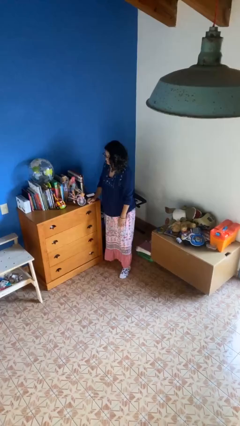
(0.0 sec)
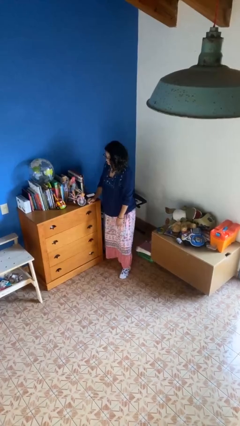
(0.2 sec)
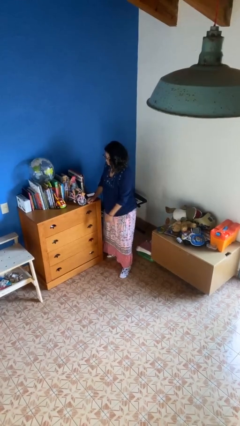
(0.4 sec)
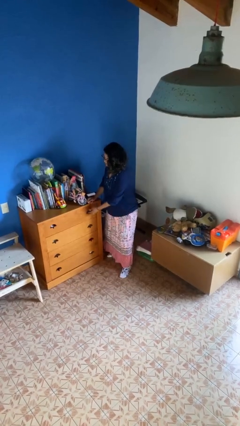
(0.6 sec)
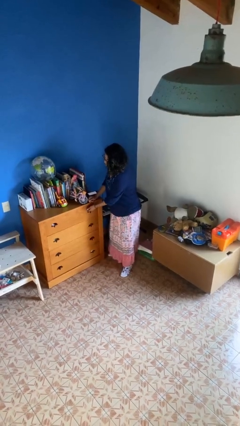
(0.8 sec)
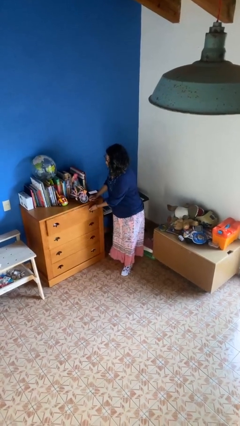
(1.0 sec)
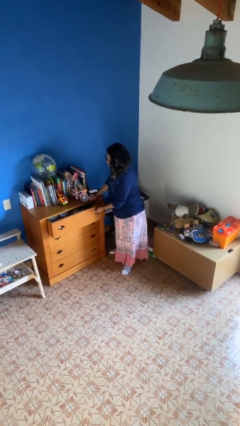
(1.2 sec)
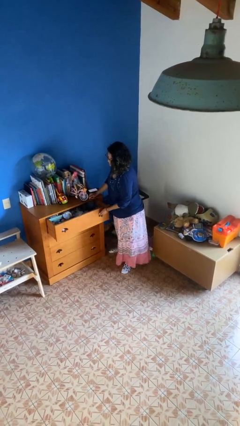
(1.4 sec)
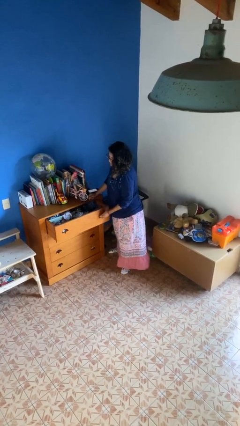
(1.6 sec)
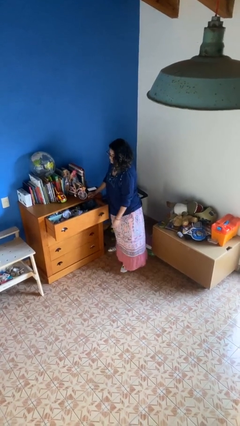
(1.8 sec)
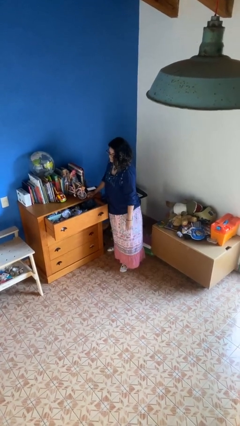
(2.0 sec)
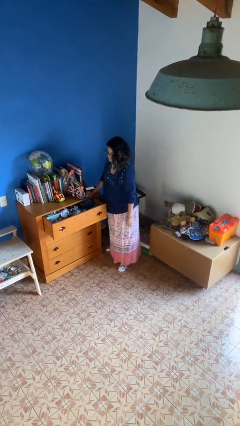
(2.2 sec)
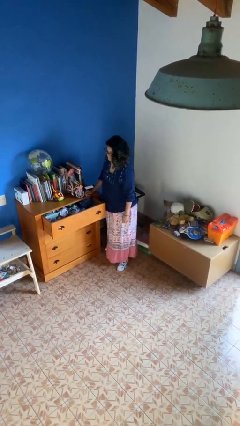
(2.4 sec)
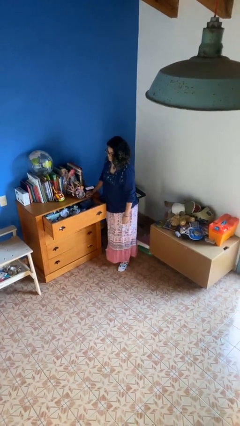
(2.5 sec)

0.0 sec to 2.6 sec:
person opens dresser drawer

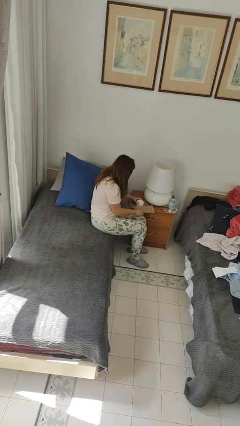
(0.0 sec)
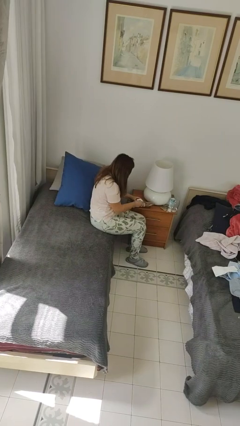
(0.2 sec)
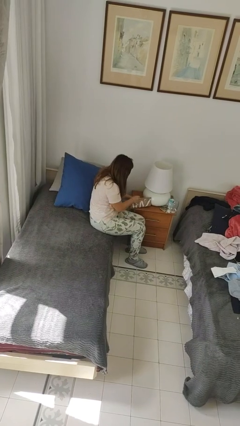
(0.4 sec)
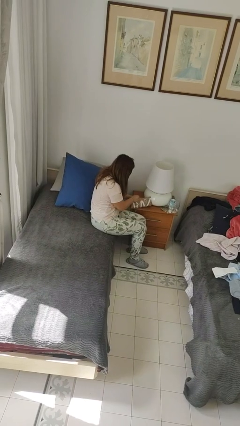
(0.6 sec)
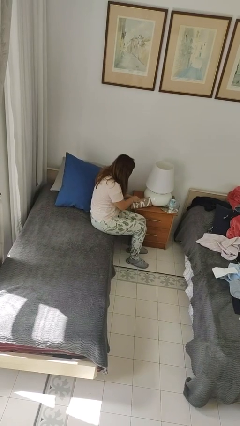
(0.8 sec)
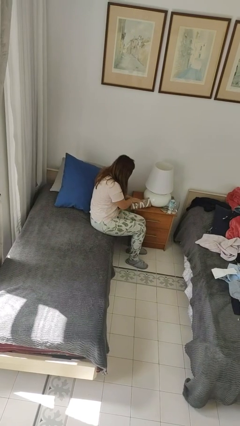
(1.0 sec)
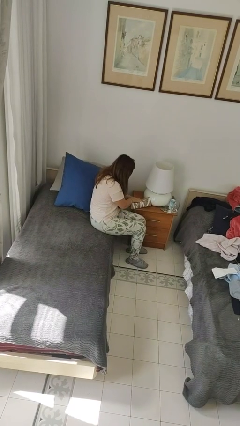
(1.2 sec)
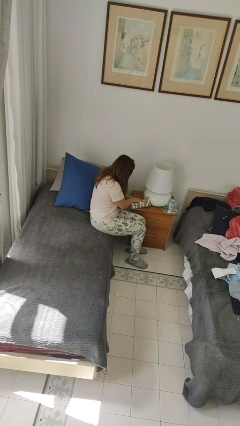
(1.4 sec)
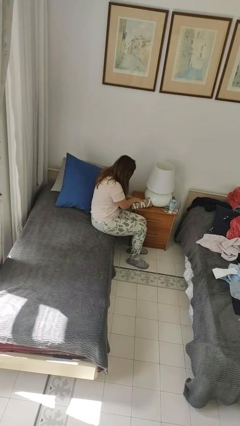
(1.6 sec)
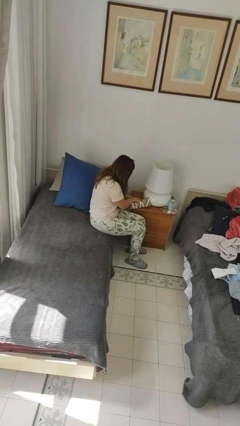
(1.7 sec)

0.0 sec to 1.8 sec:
person wraps box

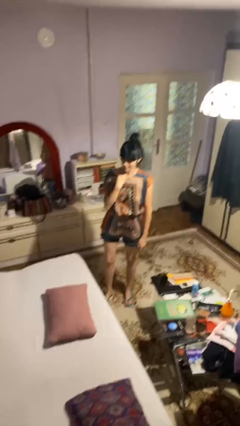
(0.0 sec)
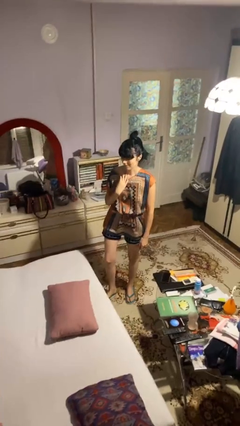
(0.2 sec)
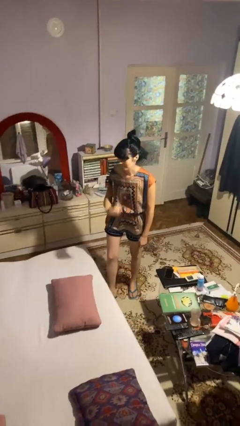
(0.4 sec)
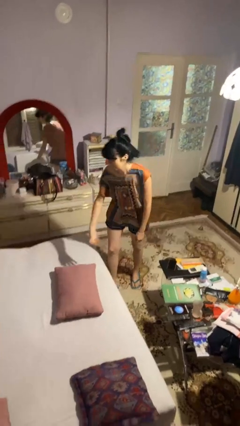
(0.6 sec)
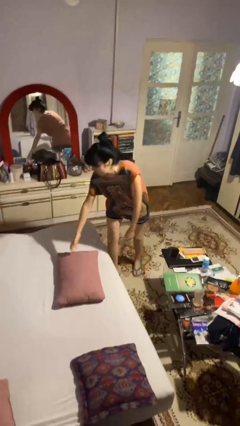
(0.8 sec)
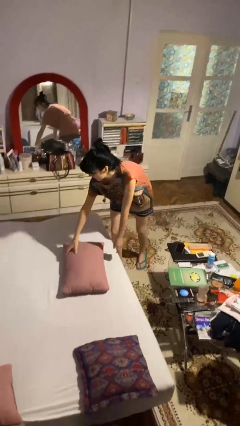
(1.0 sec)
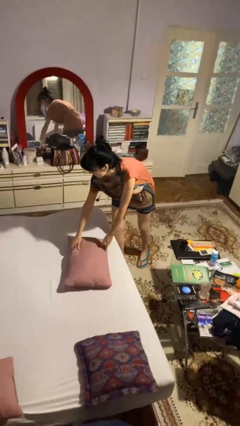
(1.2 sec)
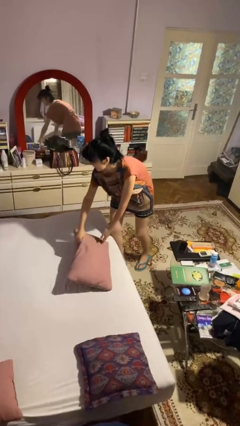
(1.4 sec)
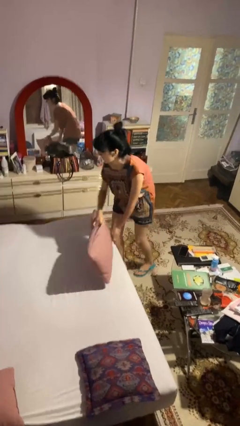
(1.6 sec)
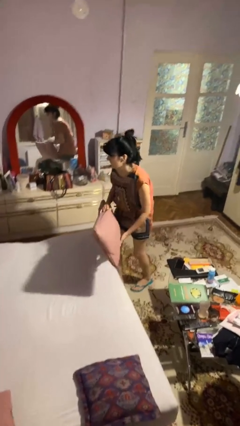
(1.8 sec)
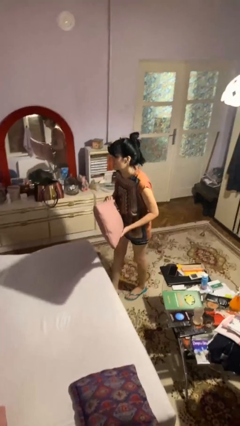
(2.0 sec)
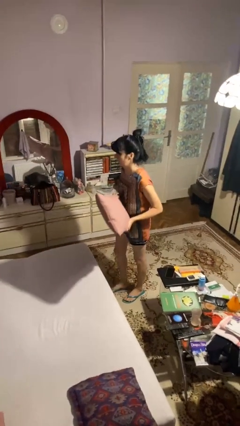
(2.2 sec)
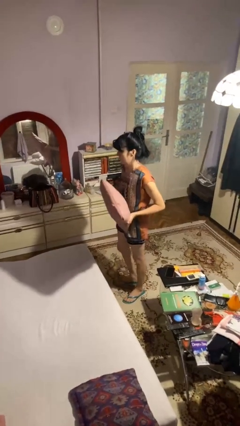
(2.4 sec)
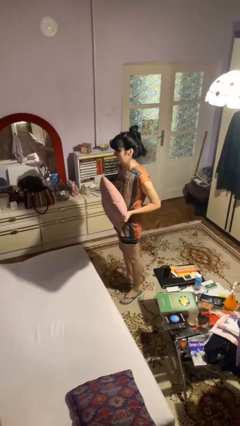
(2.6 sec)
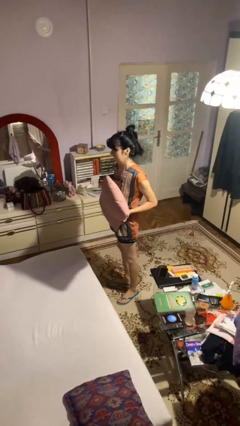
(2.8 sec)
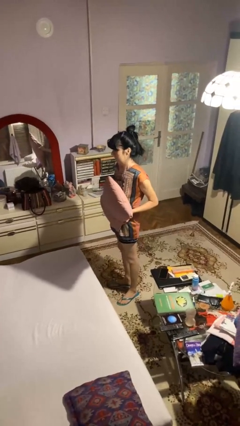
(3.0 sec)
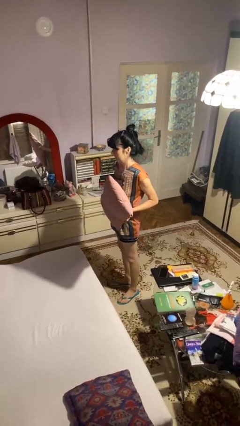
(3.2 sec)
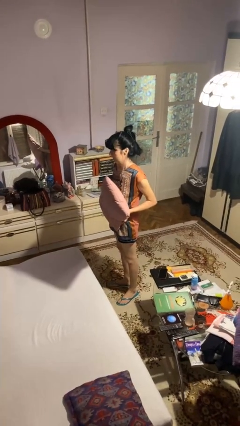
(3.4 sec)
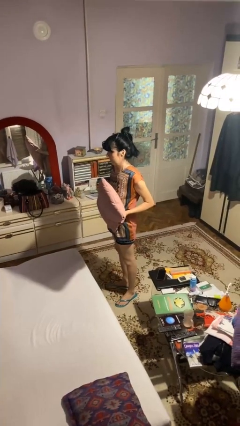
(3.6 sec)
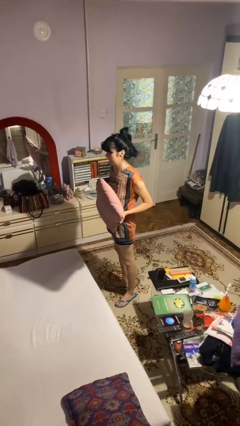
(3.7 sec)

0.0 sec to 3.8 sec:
person picks up object from bed

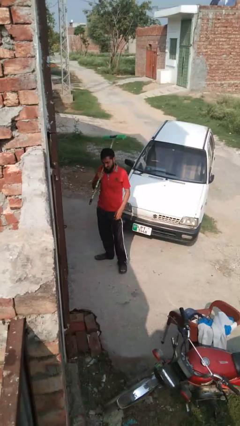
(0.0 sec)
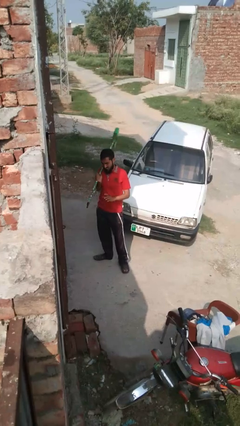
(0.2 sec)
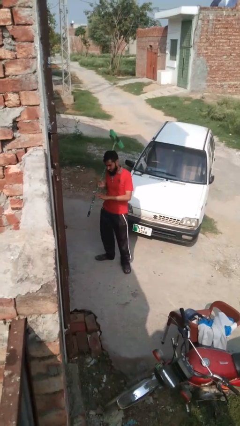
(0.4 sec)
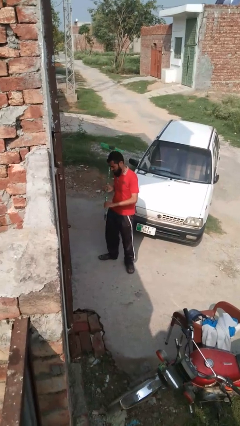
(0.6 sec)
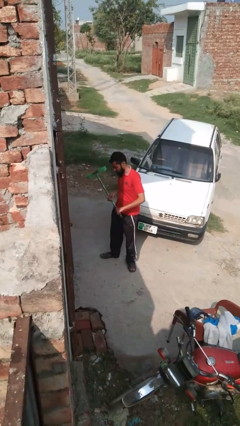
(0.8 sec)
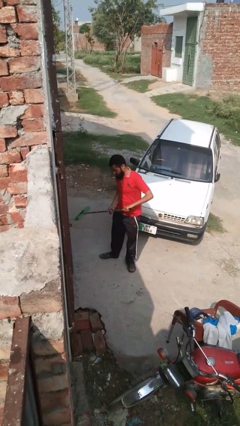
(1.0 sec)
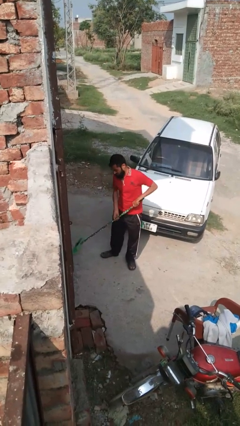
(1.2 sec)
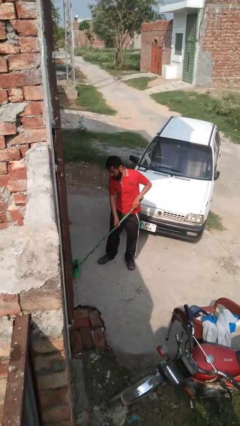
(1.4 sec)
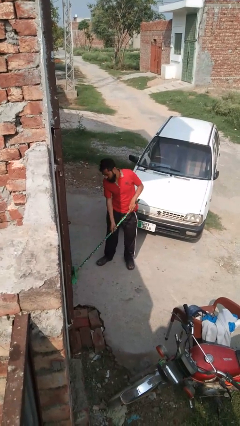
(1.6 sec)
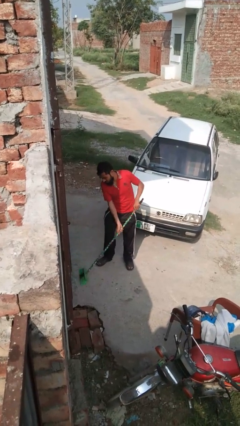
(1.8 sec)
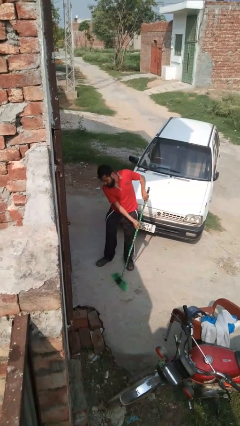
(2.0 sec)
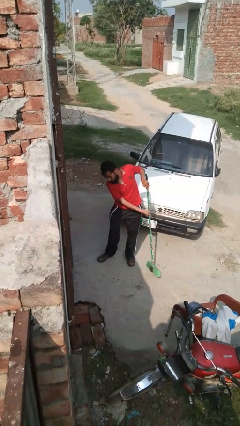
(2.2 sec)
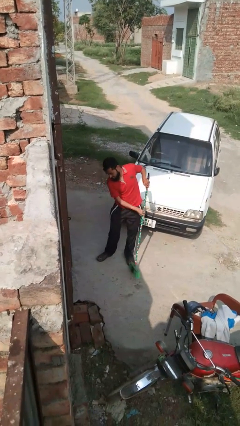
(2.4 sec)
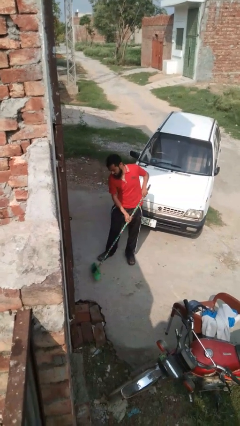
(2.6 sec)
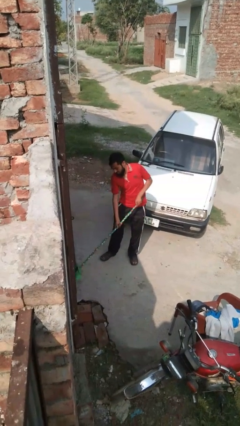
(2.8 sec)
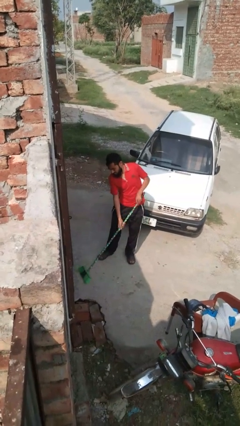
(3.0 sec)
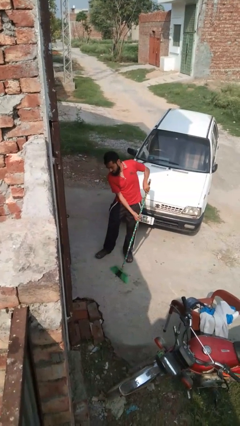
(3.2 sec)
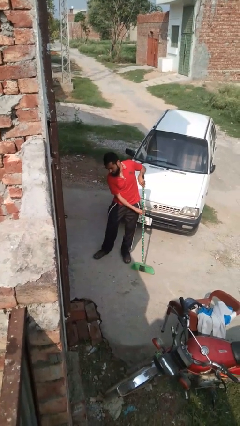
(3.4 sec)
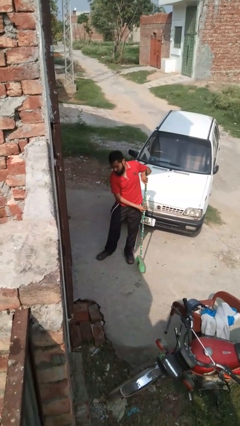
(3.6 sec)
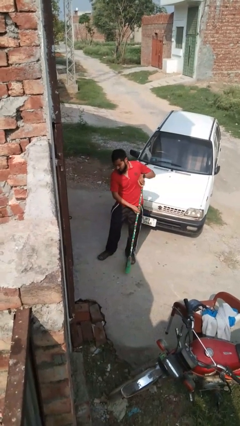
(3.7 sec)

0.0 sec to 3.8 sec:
person sweeps floor

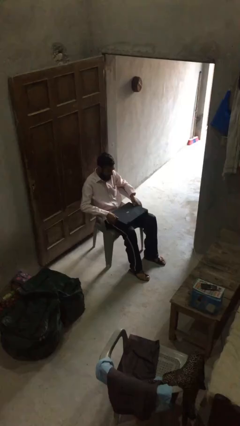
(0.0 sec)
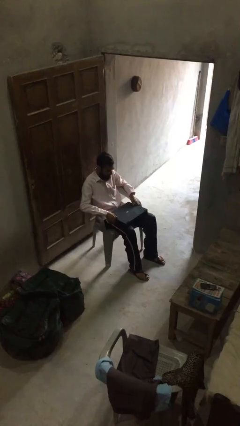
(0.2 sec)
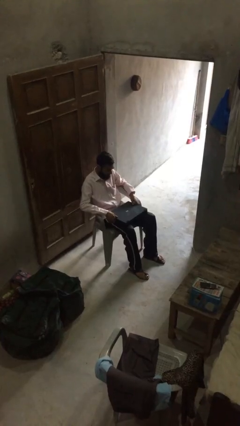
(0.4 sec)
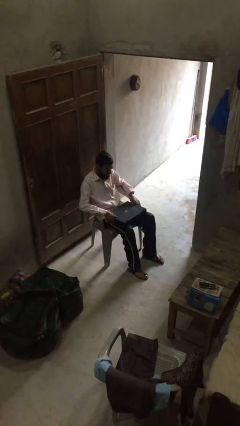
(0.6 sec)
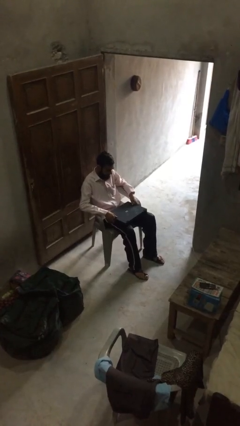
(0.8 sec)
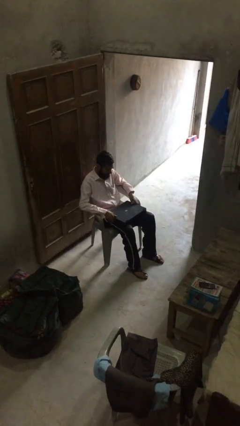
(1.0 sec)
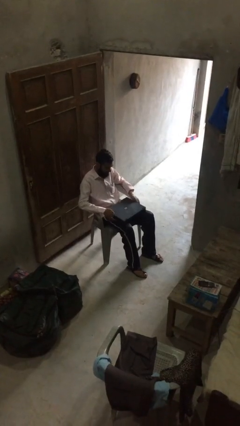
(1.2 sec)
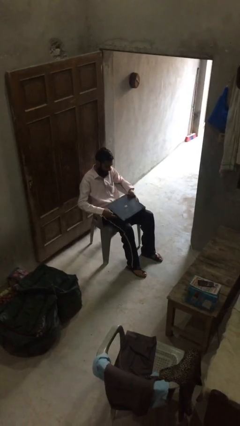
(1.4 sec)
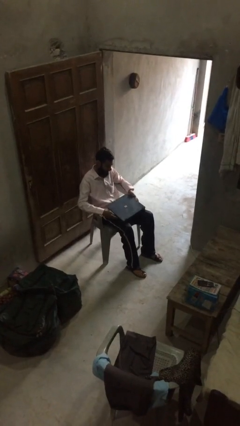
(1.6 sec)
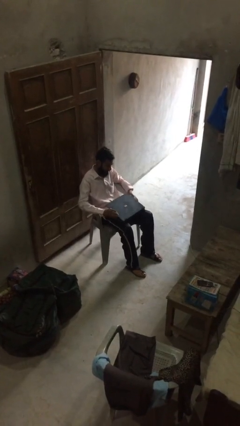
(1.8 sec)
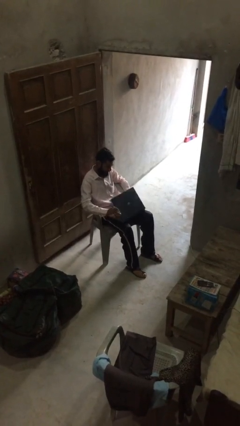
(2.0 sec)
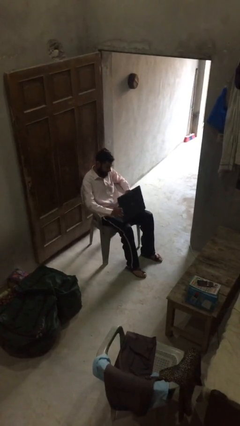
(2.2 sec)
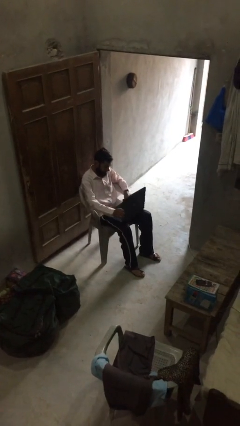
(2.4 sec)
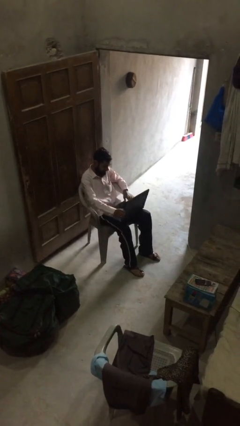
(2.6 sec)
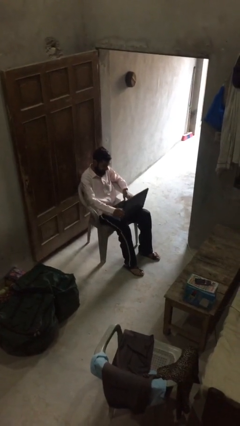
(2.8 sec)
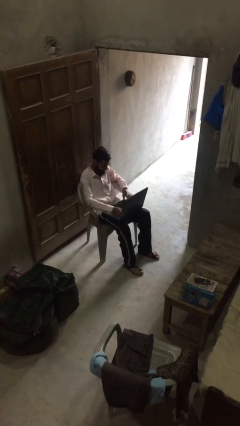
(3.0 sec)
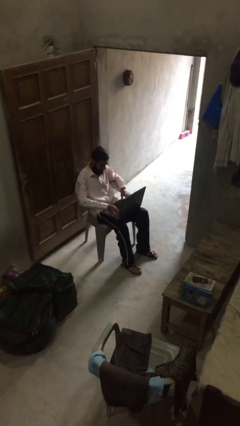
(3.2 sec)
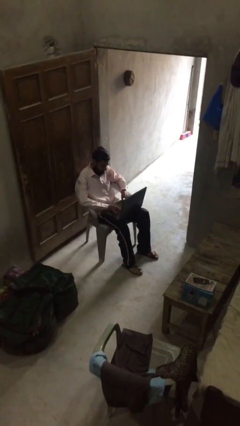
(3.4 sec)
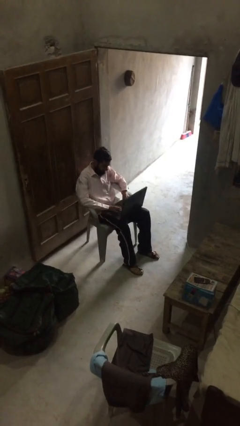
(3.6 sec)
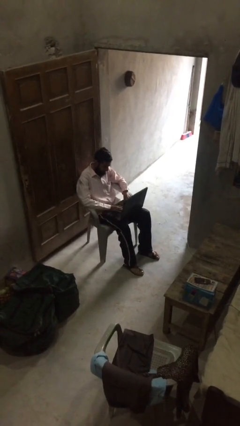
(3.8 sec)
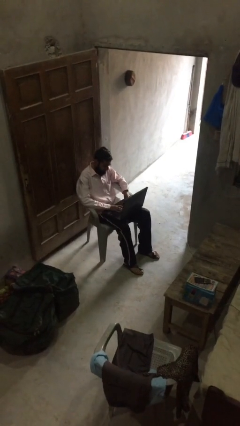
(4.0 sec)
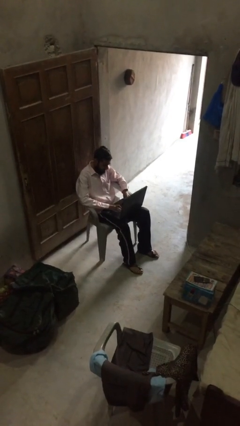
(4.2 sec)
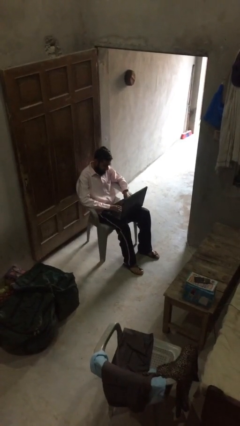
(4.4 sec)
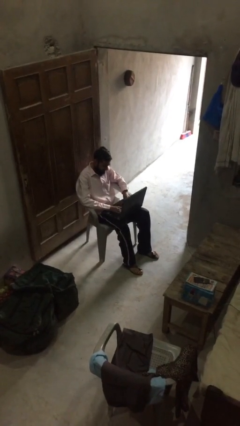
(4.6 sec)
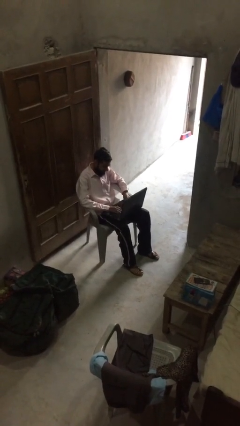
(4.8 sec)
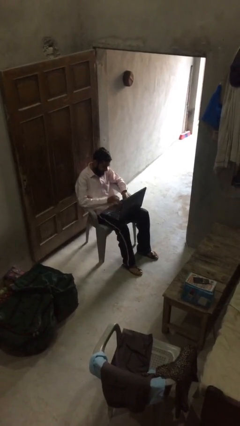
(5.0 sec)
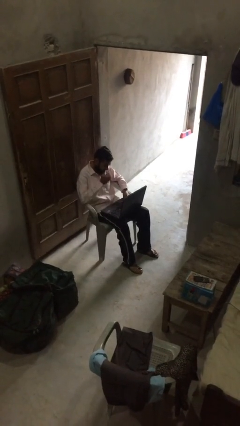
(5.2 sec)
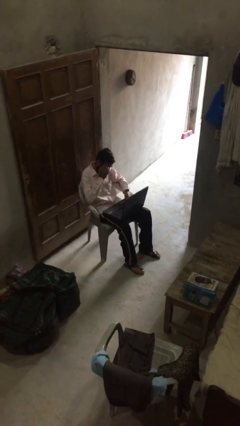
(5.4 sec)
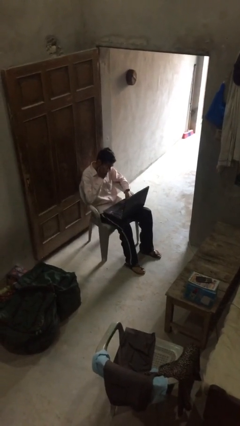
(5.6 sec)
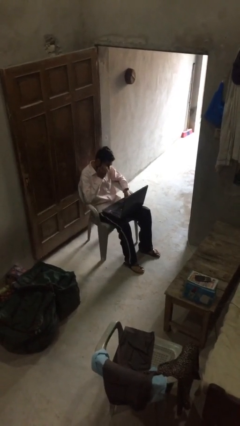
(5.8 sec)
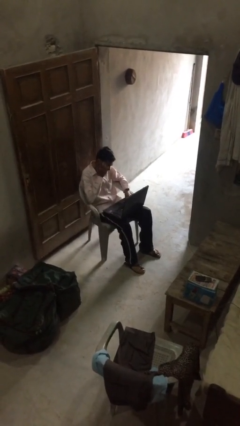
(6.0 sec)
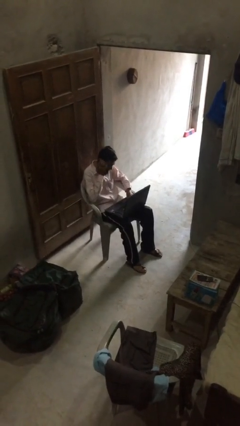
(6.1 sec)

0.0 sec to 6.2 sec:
person interacts with laptop
